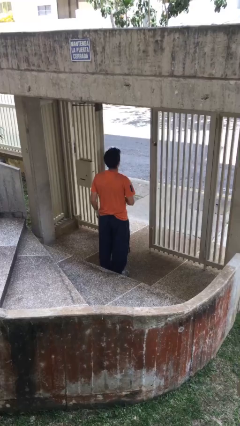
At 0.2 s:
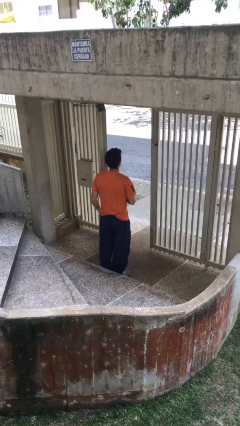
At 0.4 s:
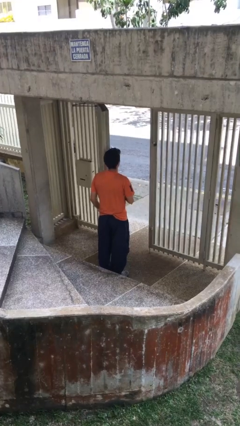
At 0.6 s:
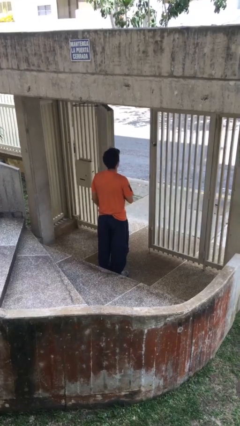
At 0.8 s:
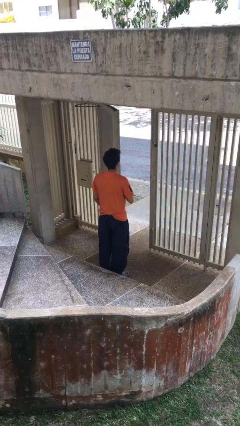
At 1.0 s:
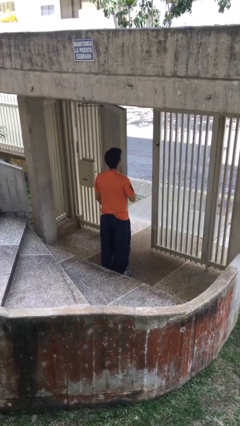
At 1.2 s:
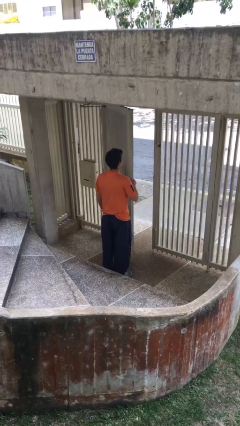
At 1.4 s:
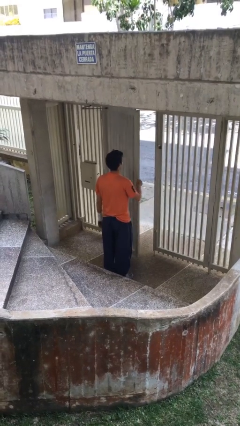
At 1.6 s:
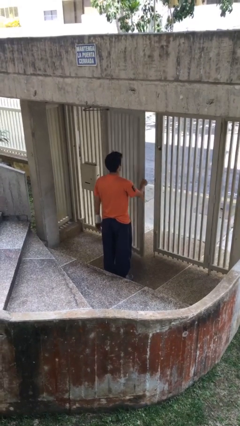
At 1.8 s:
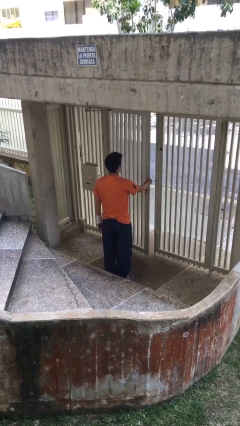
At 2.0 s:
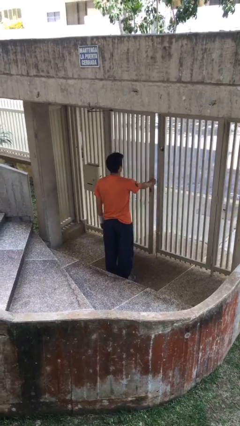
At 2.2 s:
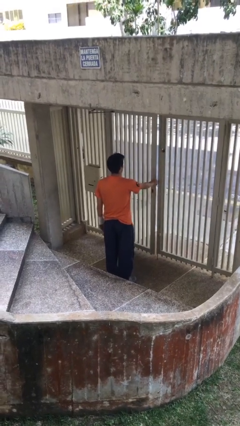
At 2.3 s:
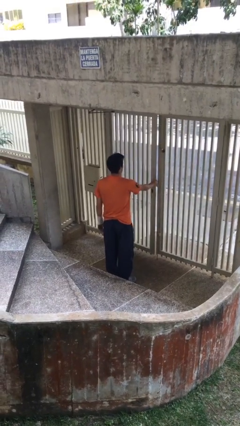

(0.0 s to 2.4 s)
person closes facility door

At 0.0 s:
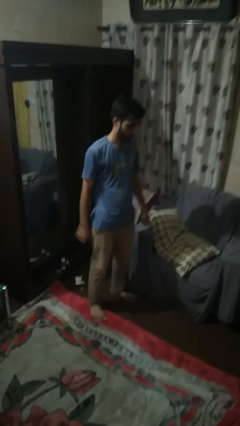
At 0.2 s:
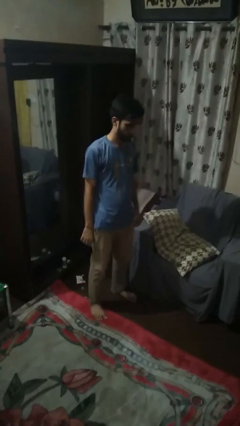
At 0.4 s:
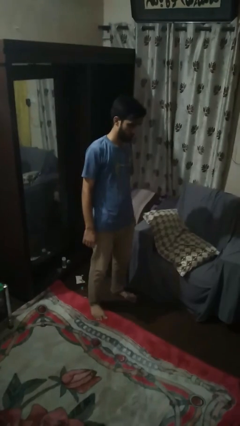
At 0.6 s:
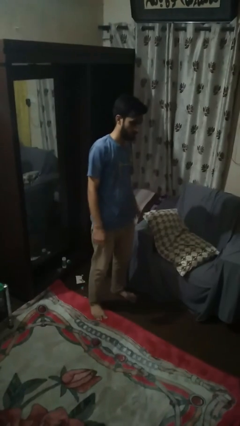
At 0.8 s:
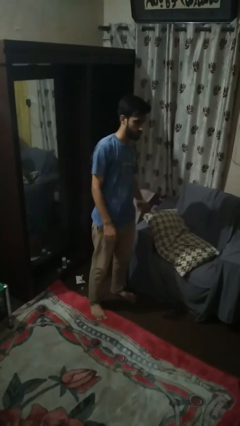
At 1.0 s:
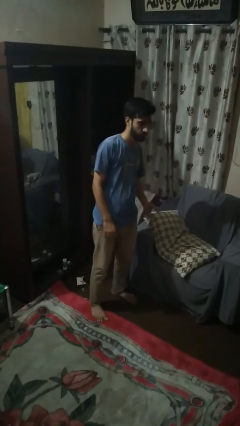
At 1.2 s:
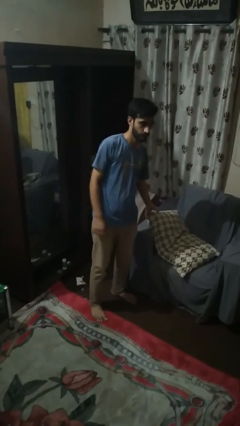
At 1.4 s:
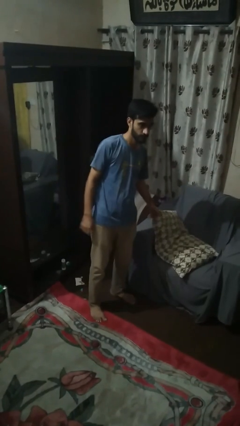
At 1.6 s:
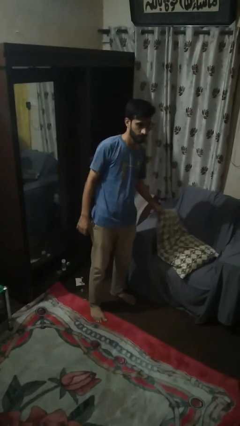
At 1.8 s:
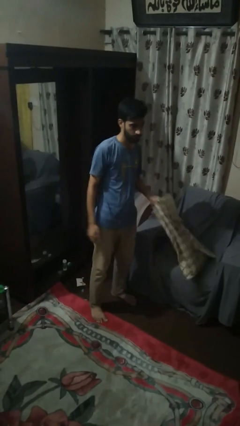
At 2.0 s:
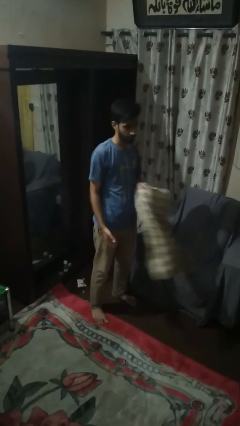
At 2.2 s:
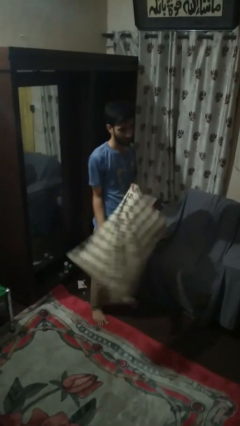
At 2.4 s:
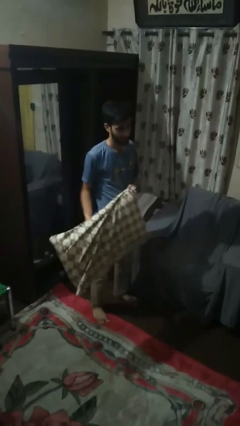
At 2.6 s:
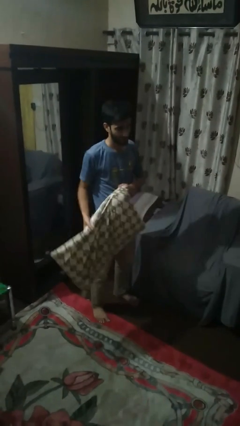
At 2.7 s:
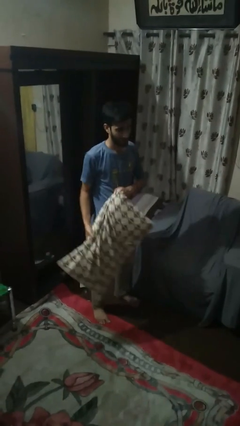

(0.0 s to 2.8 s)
person picks up object from couch

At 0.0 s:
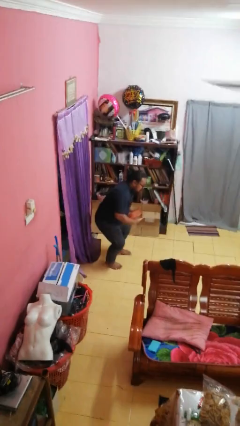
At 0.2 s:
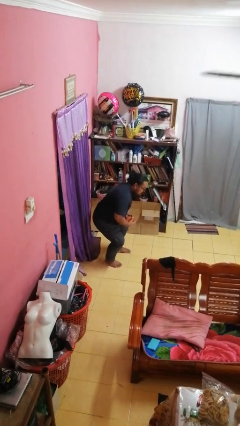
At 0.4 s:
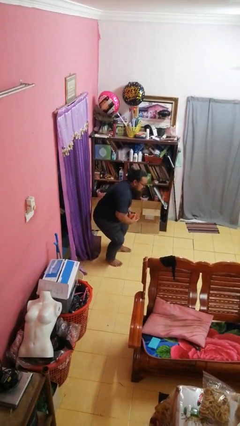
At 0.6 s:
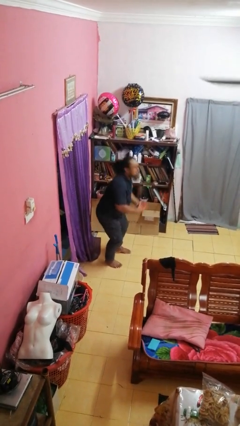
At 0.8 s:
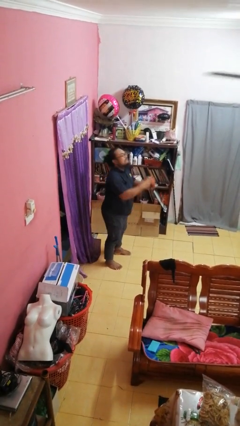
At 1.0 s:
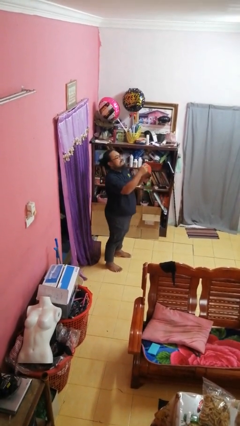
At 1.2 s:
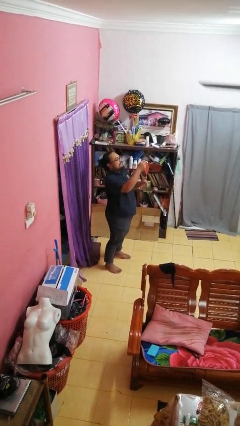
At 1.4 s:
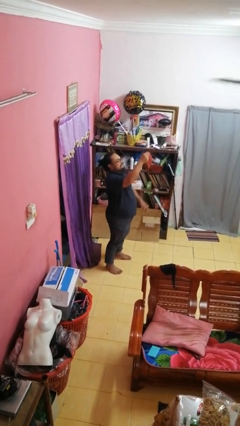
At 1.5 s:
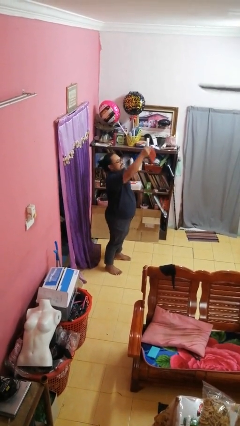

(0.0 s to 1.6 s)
person catches dropped object

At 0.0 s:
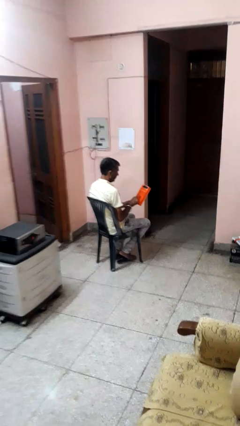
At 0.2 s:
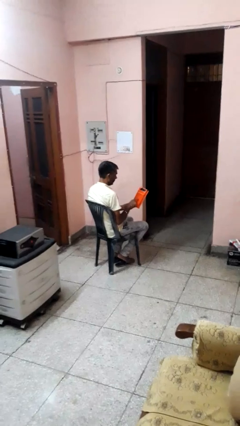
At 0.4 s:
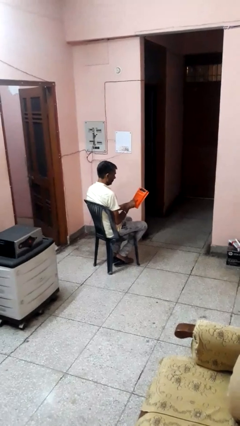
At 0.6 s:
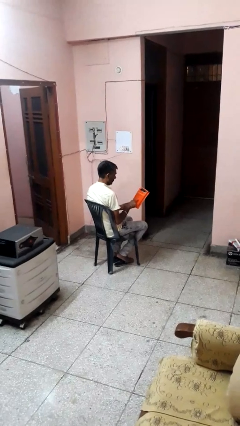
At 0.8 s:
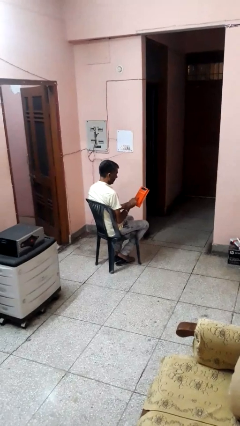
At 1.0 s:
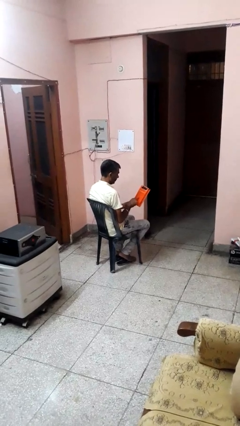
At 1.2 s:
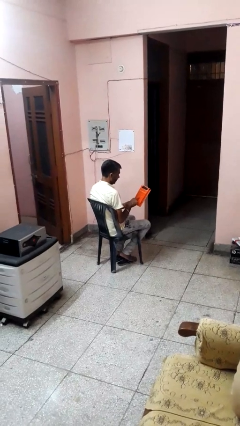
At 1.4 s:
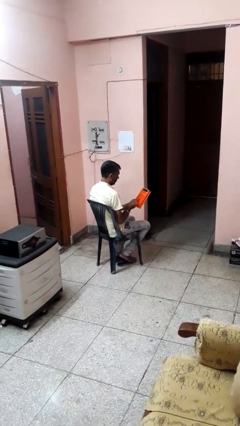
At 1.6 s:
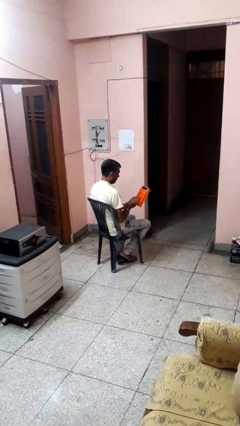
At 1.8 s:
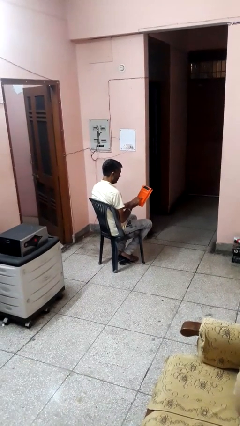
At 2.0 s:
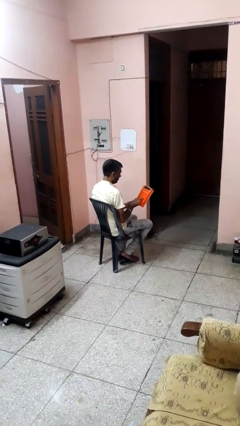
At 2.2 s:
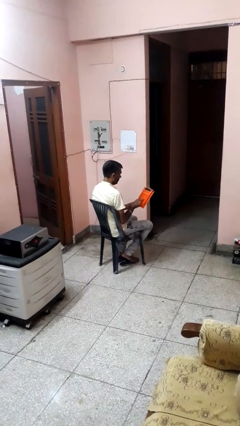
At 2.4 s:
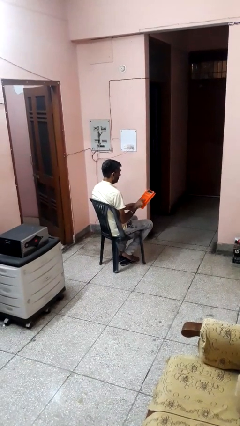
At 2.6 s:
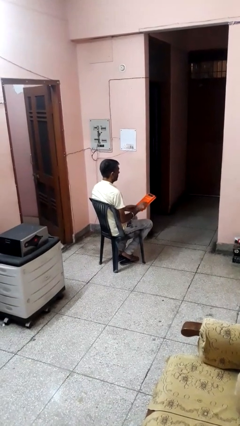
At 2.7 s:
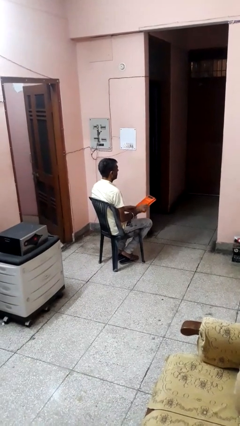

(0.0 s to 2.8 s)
person taps object with finger

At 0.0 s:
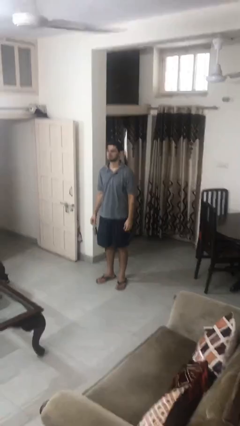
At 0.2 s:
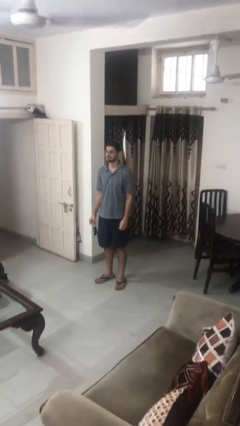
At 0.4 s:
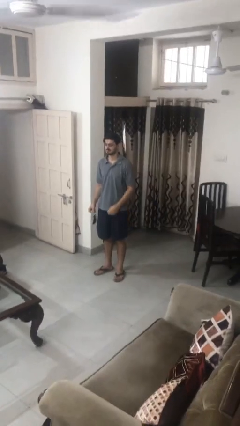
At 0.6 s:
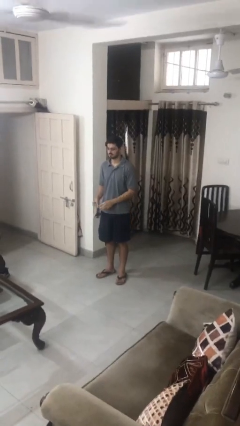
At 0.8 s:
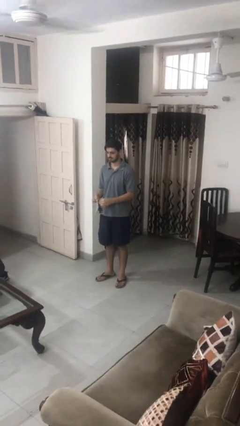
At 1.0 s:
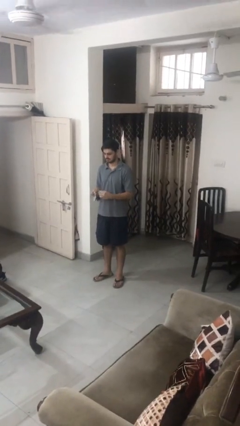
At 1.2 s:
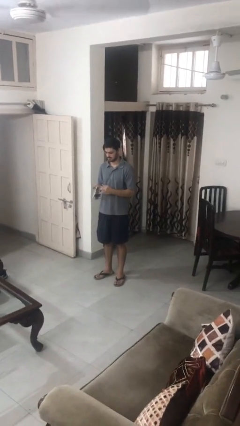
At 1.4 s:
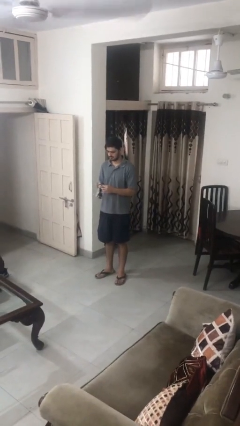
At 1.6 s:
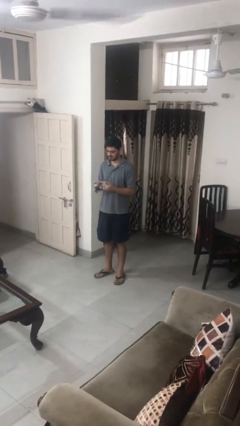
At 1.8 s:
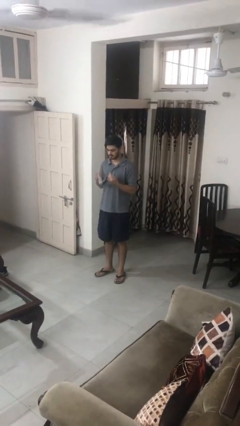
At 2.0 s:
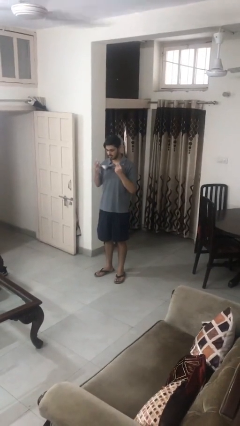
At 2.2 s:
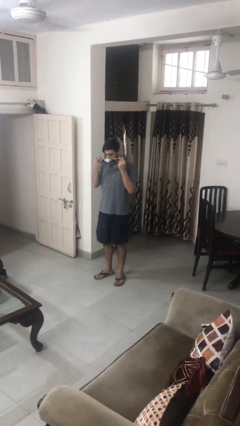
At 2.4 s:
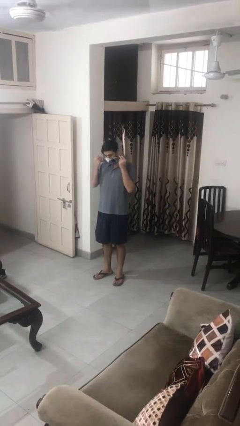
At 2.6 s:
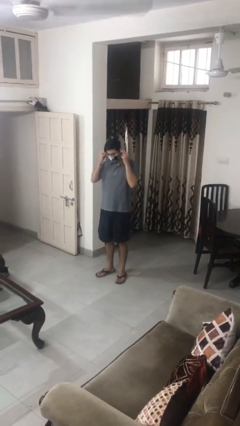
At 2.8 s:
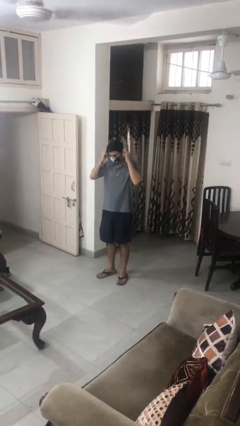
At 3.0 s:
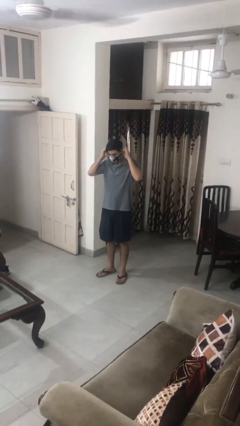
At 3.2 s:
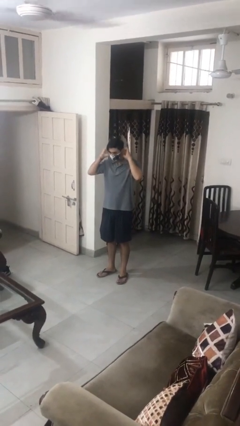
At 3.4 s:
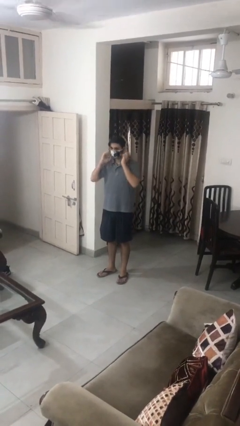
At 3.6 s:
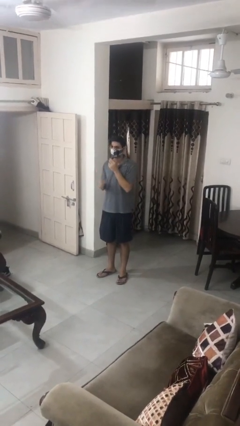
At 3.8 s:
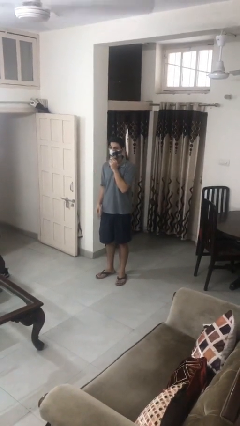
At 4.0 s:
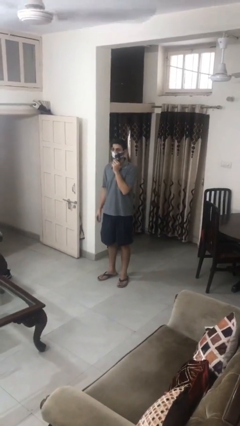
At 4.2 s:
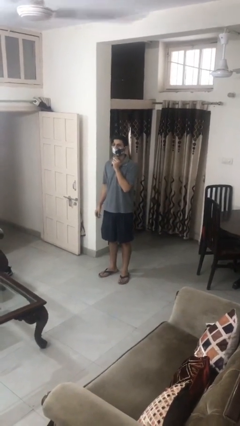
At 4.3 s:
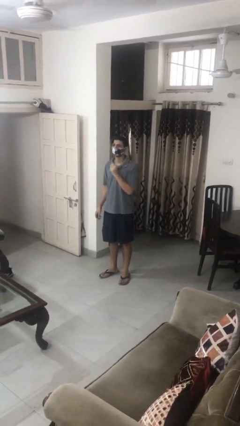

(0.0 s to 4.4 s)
person puts on facemask

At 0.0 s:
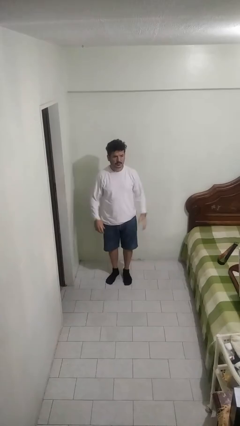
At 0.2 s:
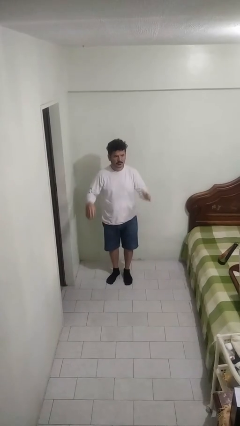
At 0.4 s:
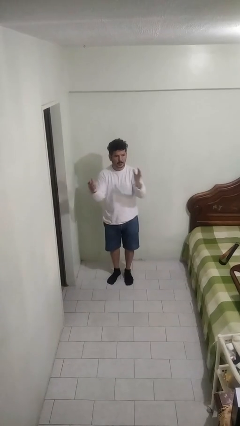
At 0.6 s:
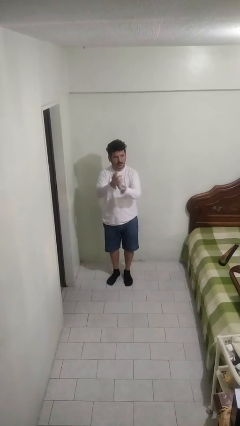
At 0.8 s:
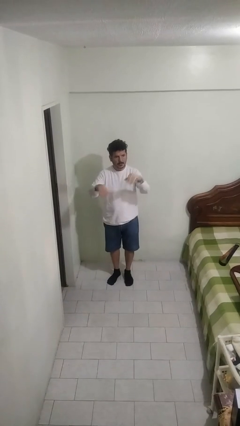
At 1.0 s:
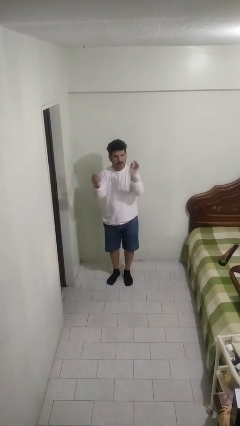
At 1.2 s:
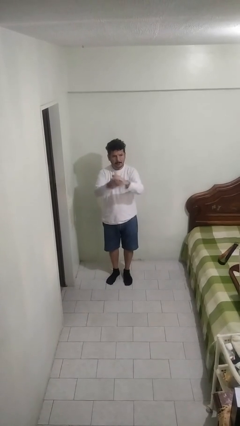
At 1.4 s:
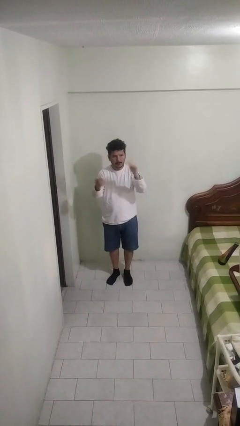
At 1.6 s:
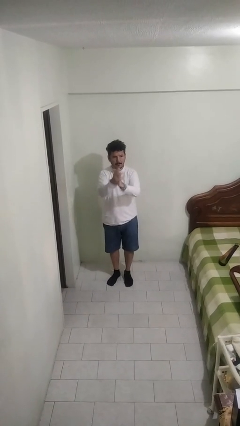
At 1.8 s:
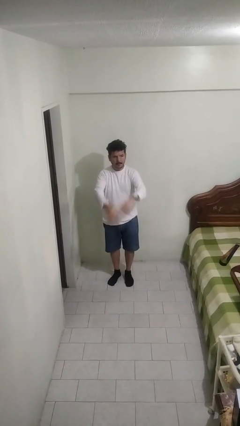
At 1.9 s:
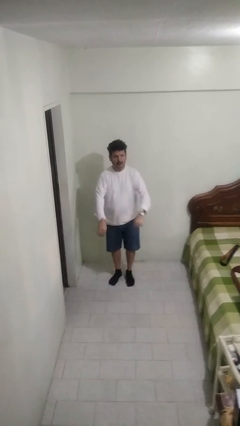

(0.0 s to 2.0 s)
person claps hands

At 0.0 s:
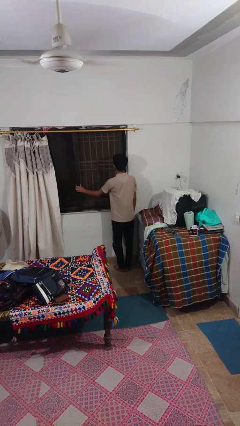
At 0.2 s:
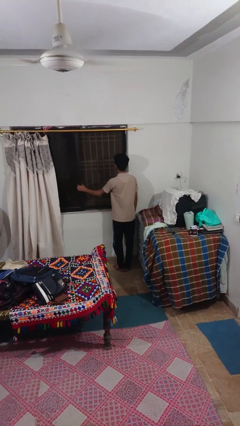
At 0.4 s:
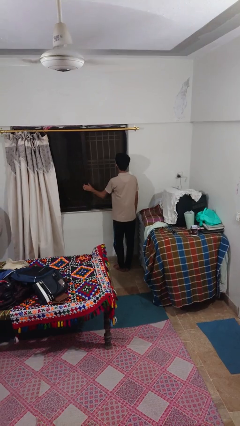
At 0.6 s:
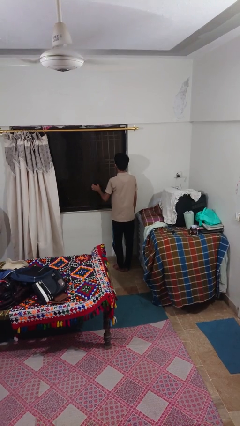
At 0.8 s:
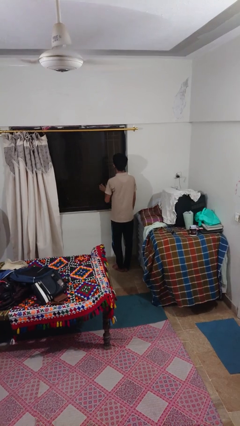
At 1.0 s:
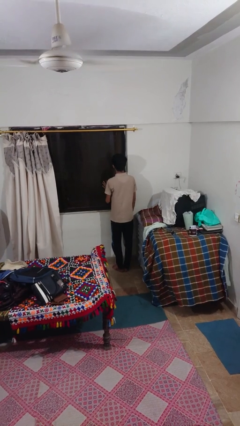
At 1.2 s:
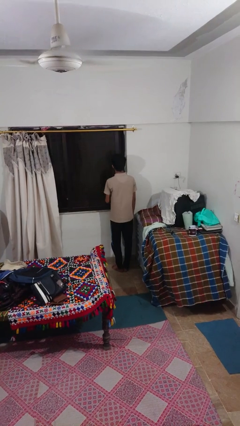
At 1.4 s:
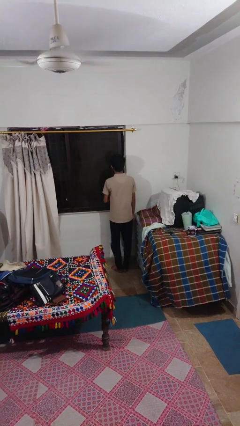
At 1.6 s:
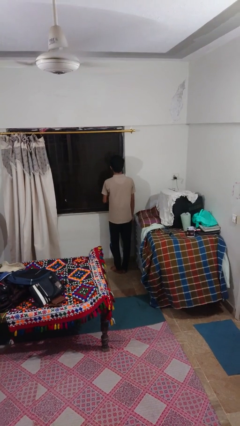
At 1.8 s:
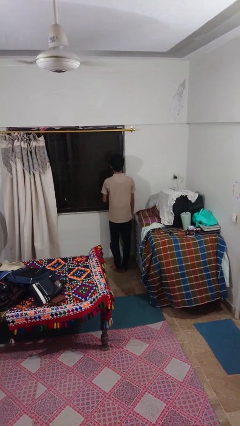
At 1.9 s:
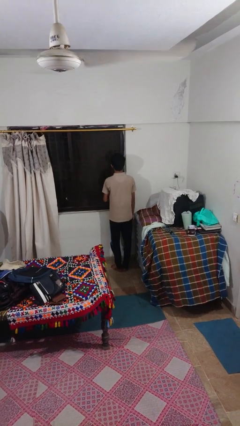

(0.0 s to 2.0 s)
person closes sliding door
